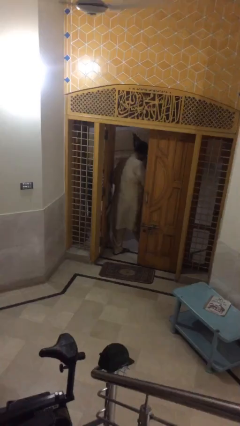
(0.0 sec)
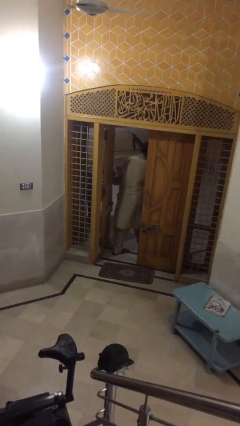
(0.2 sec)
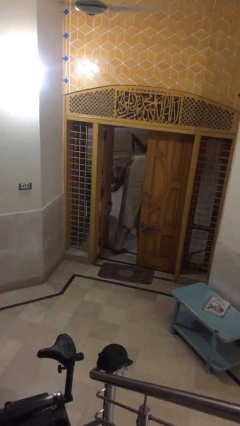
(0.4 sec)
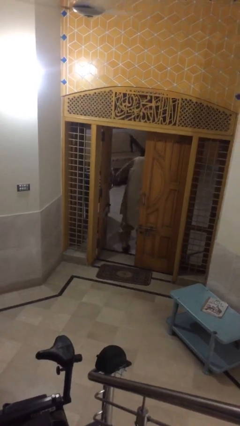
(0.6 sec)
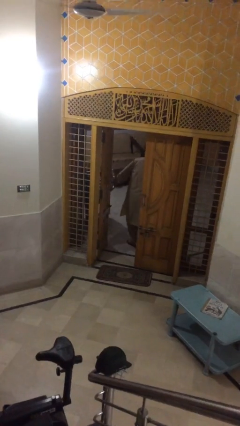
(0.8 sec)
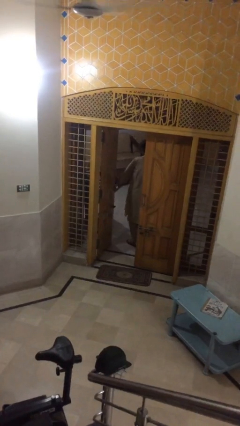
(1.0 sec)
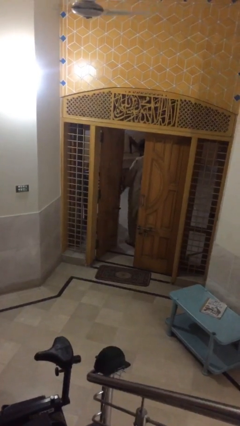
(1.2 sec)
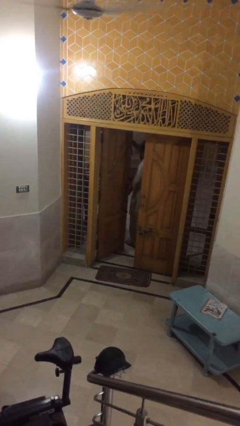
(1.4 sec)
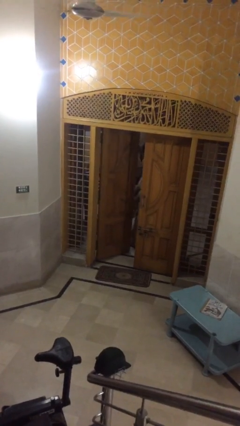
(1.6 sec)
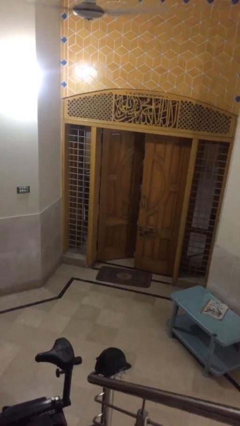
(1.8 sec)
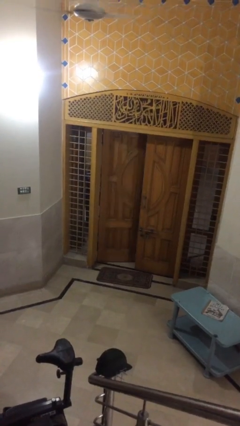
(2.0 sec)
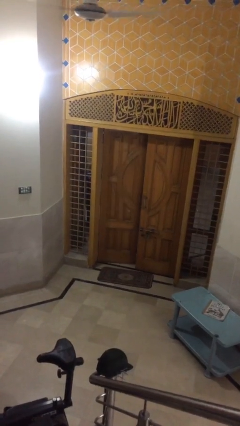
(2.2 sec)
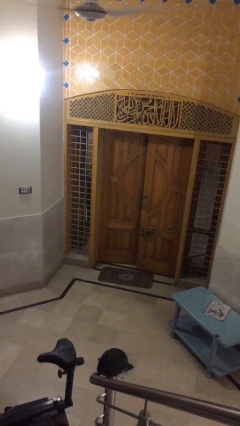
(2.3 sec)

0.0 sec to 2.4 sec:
person closes facility door

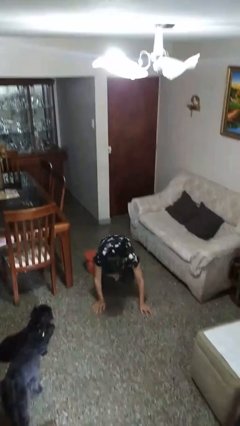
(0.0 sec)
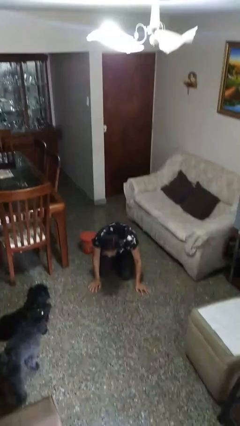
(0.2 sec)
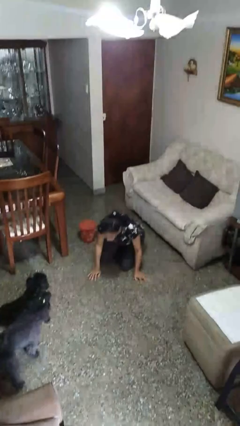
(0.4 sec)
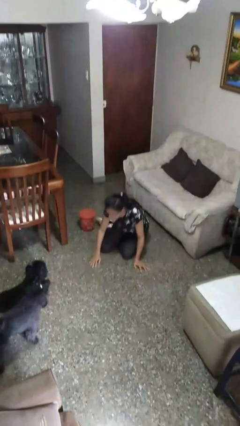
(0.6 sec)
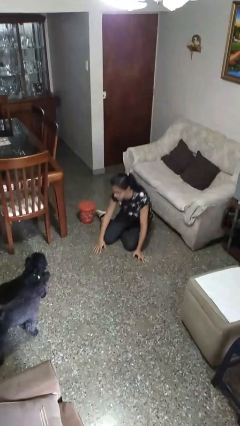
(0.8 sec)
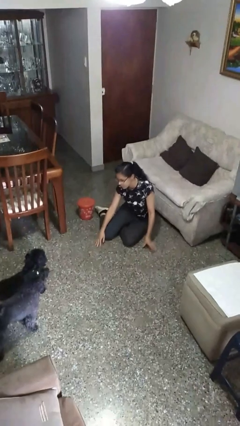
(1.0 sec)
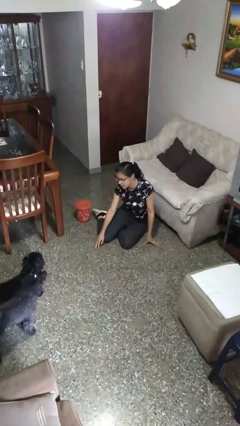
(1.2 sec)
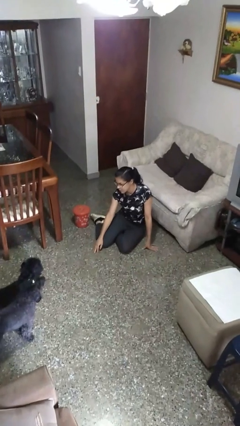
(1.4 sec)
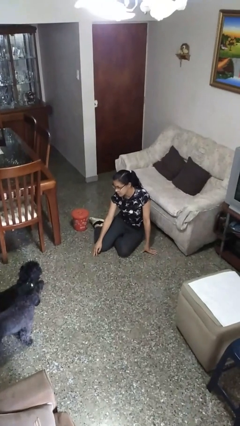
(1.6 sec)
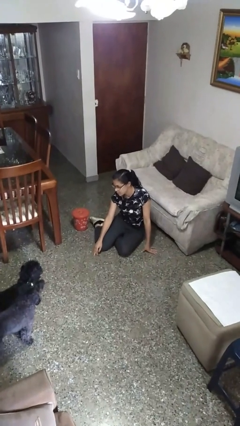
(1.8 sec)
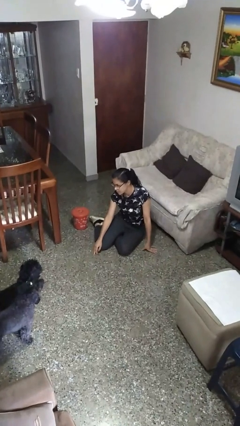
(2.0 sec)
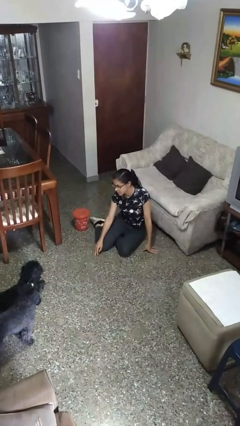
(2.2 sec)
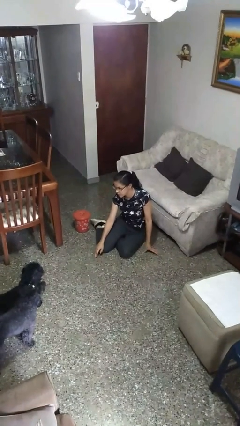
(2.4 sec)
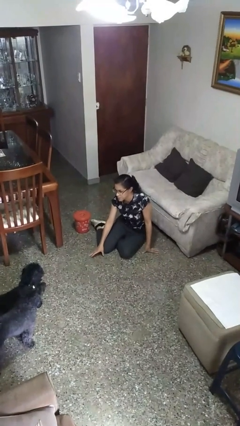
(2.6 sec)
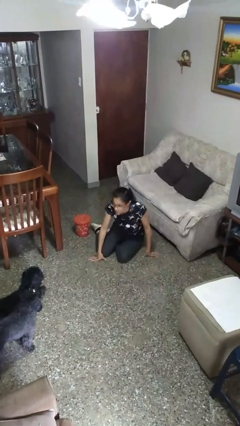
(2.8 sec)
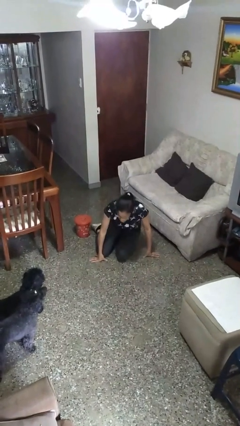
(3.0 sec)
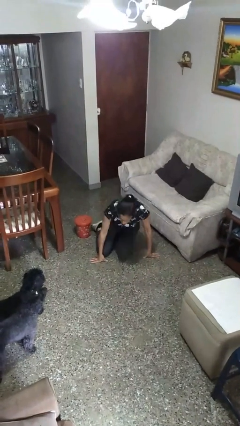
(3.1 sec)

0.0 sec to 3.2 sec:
person stands up from floor

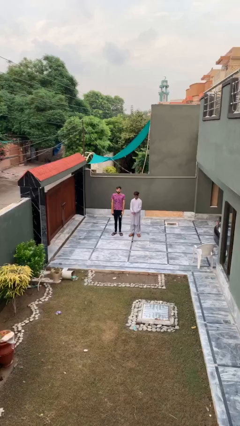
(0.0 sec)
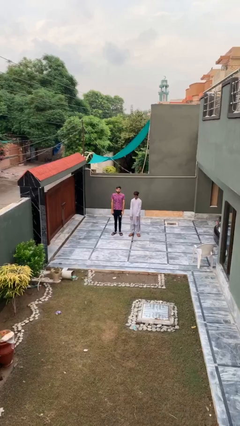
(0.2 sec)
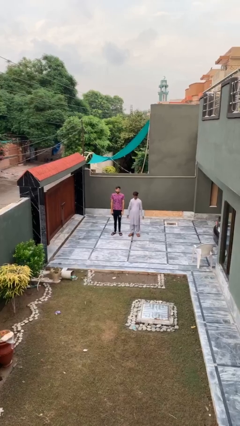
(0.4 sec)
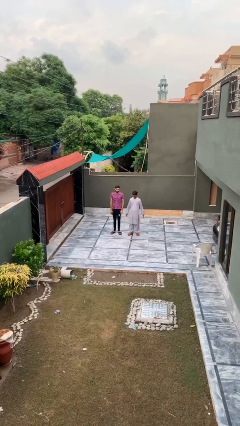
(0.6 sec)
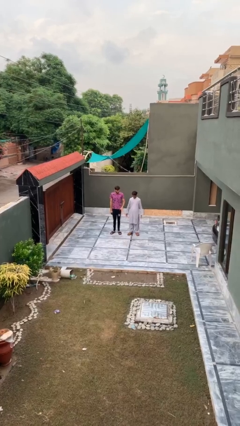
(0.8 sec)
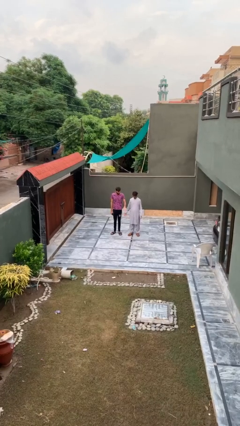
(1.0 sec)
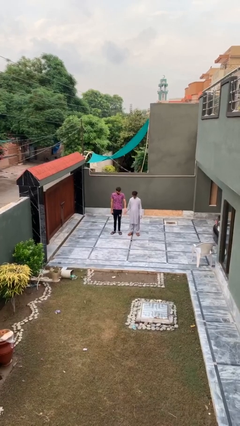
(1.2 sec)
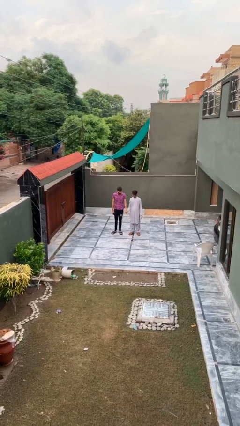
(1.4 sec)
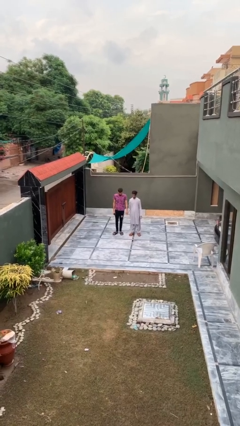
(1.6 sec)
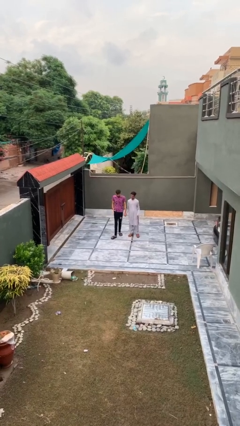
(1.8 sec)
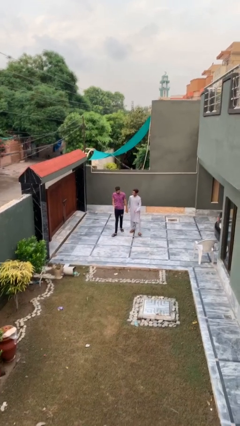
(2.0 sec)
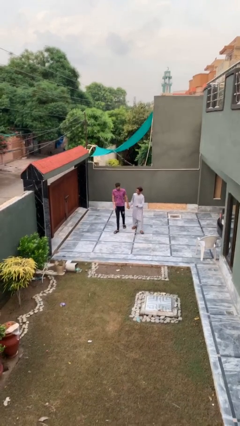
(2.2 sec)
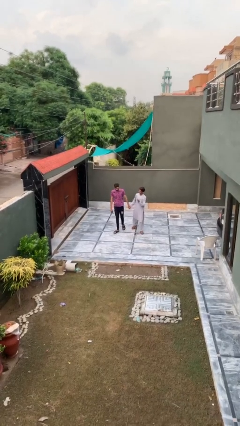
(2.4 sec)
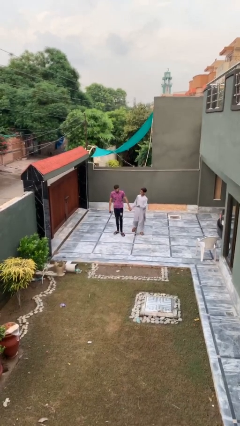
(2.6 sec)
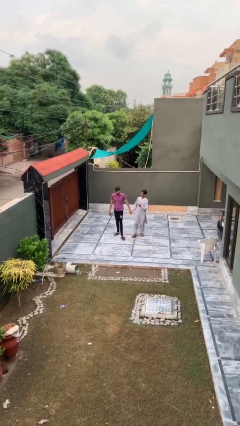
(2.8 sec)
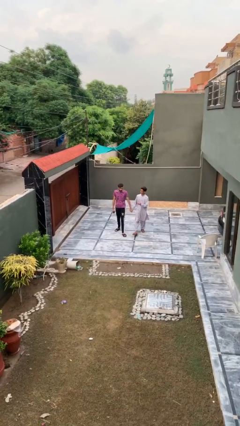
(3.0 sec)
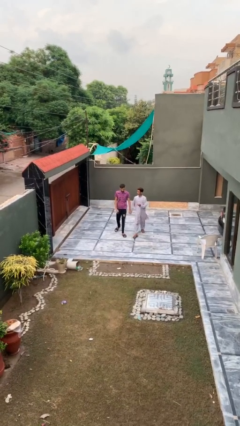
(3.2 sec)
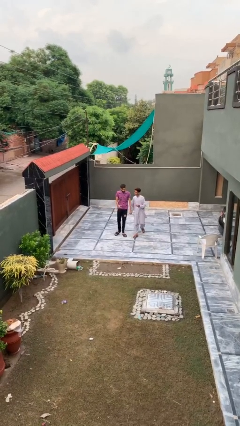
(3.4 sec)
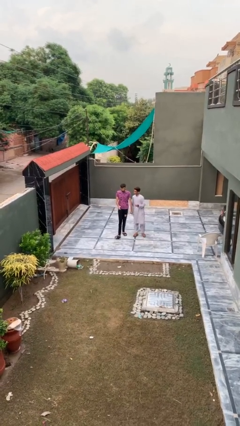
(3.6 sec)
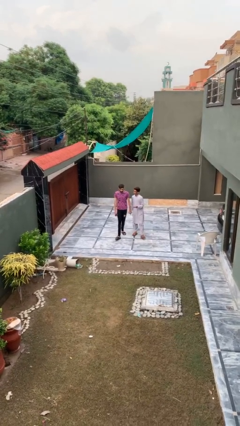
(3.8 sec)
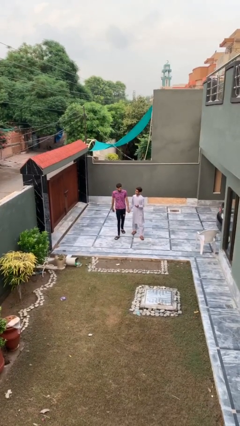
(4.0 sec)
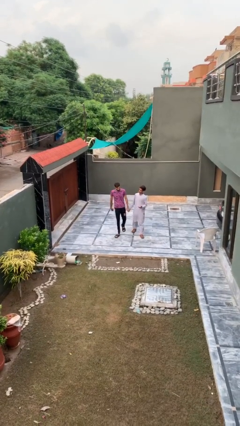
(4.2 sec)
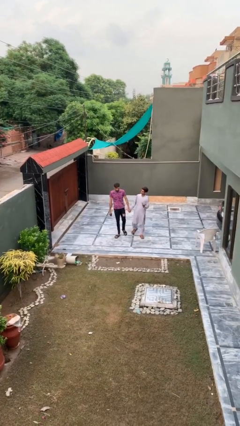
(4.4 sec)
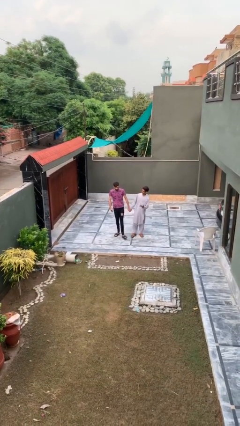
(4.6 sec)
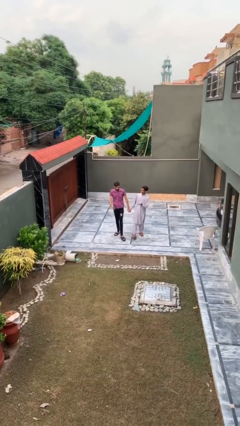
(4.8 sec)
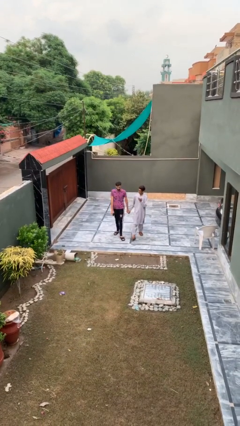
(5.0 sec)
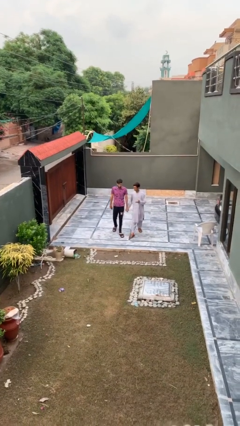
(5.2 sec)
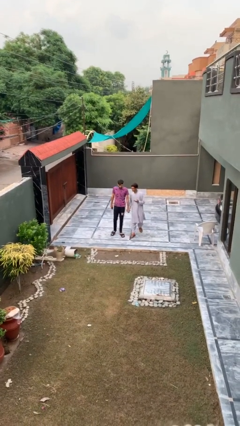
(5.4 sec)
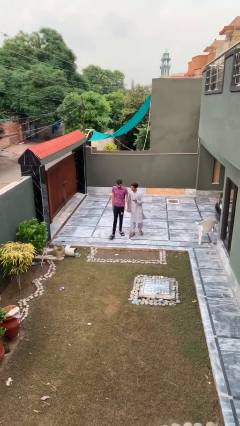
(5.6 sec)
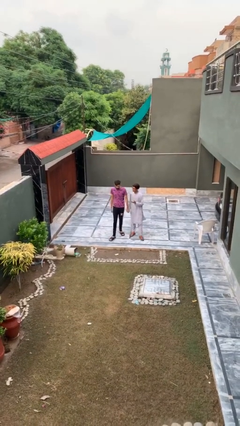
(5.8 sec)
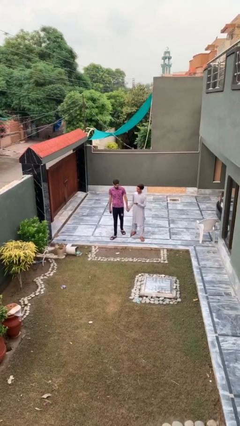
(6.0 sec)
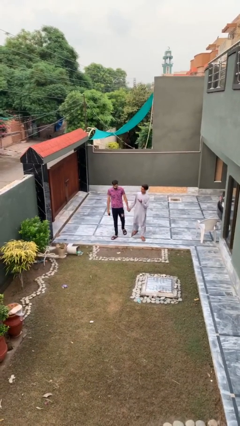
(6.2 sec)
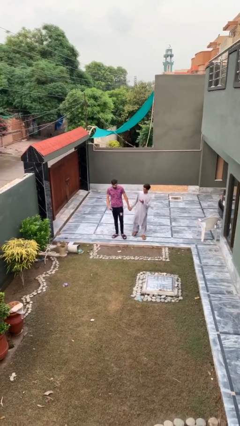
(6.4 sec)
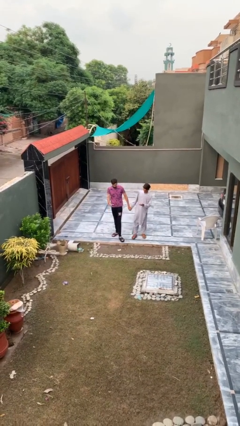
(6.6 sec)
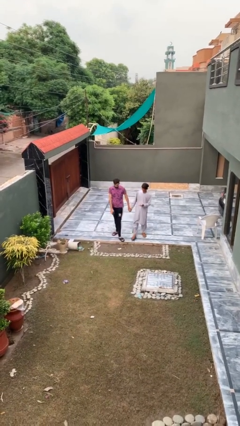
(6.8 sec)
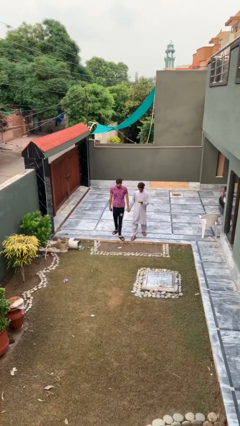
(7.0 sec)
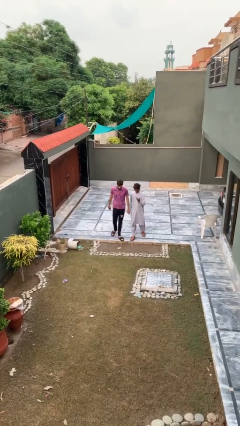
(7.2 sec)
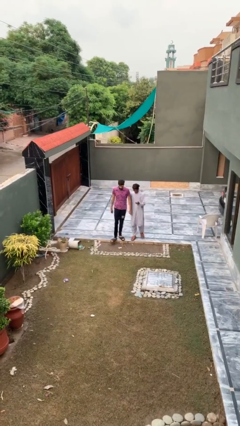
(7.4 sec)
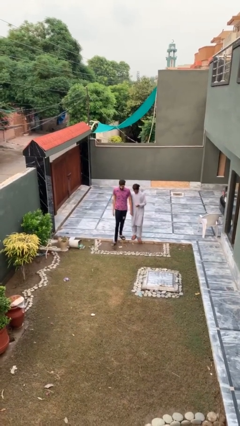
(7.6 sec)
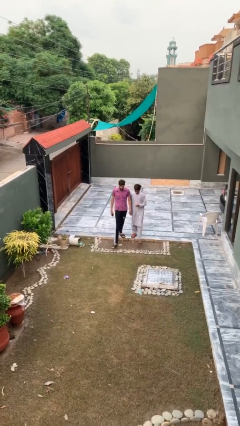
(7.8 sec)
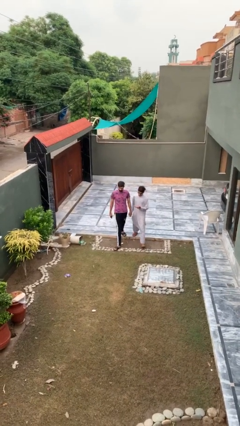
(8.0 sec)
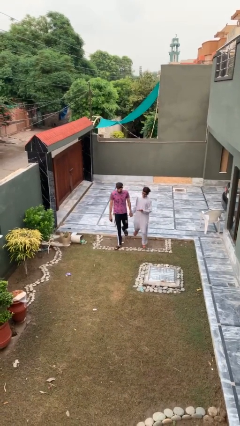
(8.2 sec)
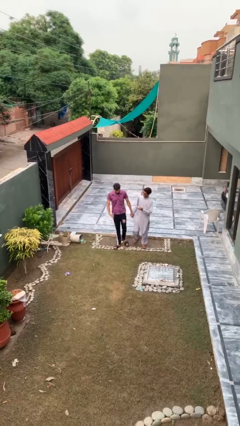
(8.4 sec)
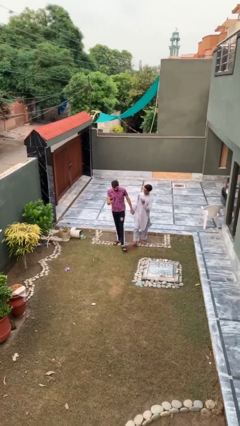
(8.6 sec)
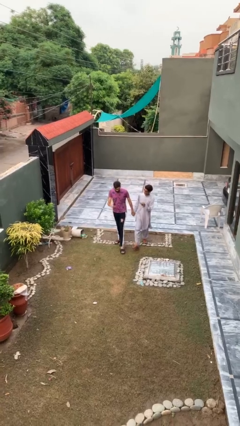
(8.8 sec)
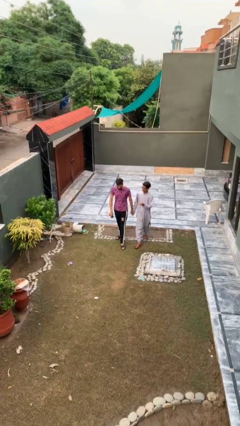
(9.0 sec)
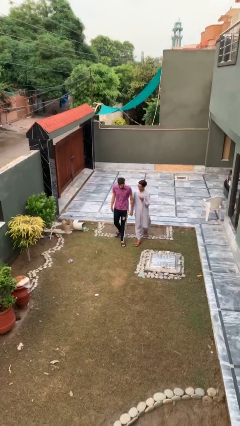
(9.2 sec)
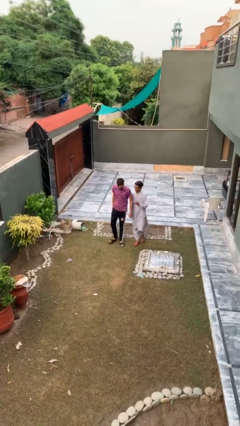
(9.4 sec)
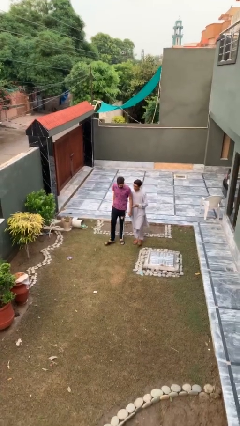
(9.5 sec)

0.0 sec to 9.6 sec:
person holds hand

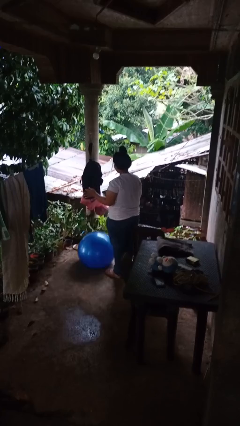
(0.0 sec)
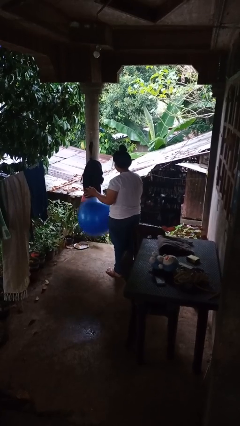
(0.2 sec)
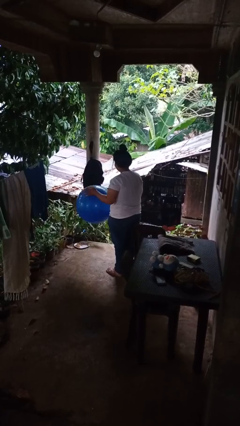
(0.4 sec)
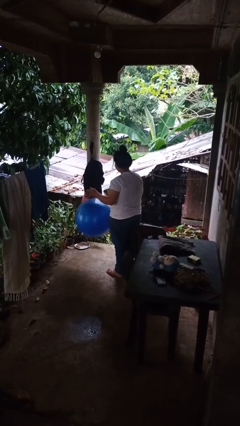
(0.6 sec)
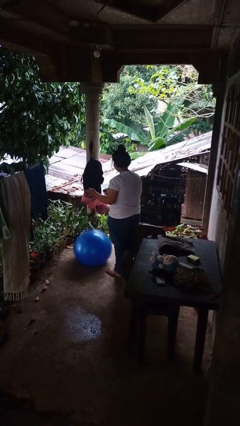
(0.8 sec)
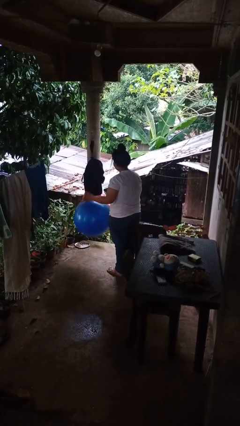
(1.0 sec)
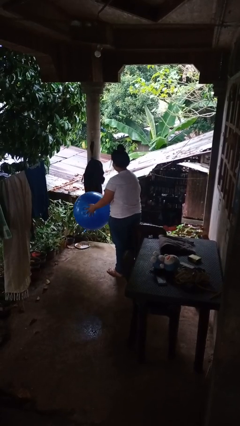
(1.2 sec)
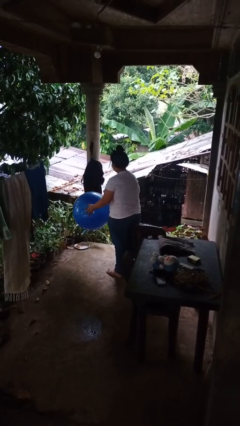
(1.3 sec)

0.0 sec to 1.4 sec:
person bounces ball on floor

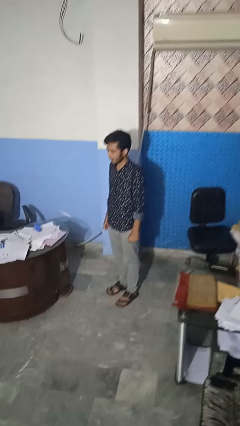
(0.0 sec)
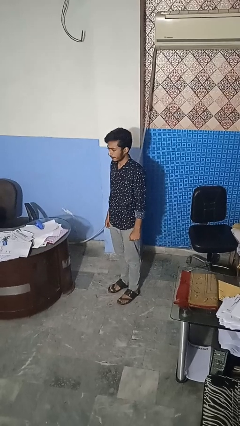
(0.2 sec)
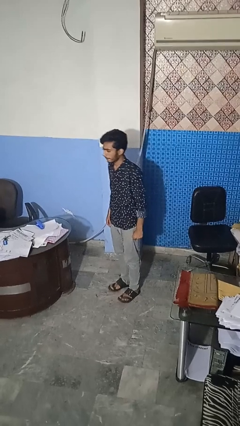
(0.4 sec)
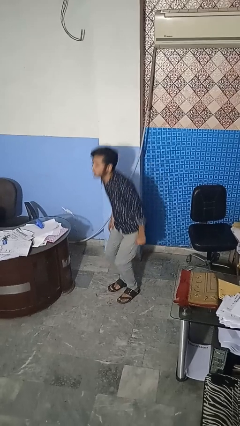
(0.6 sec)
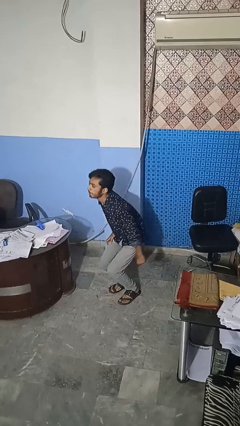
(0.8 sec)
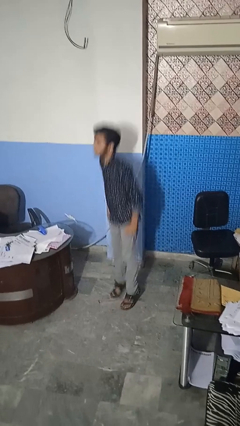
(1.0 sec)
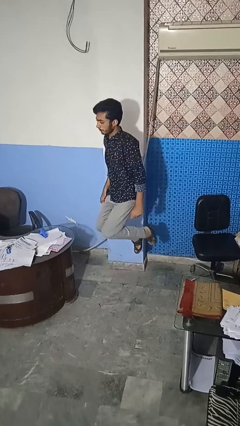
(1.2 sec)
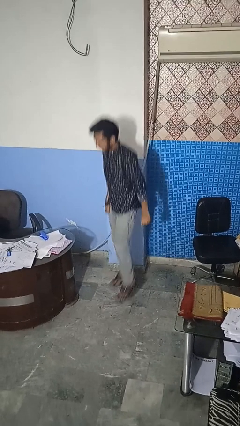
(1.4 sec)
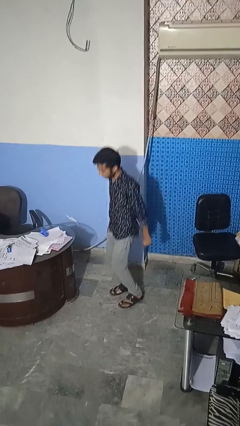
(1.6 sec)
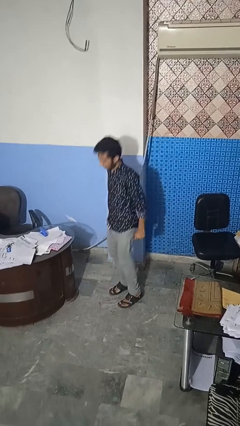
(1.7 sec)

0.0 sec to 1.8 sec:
person jumps
